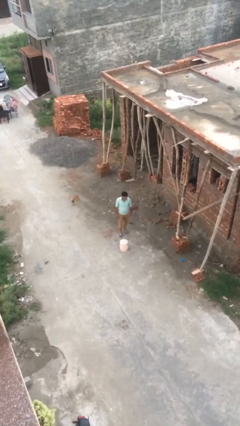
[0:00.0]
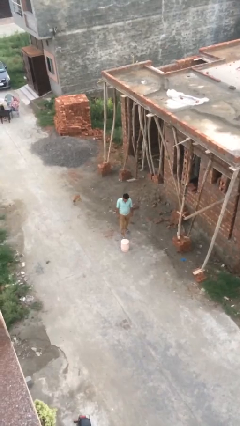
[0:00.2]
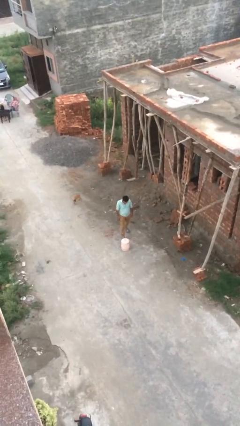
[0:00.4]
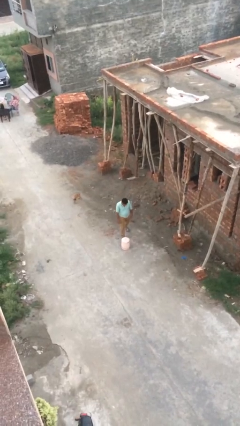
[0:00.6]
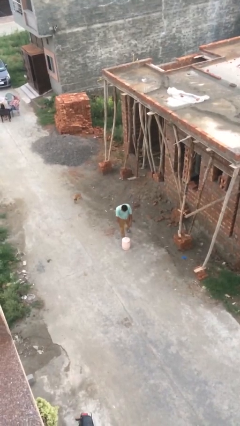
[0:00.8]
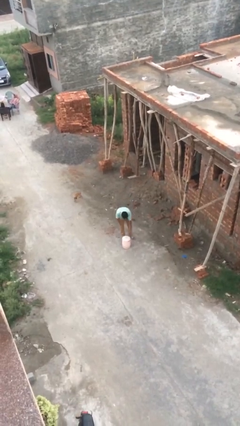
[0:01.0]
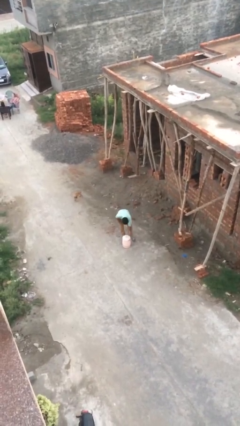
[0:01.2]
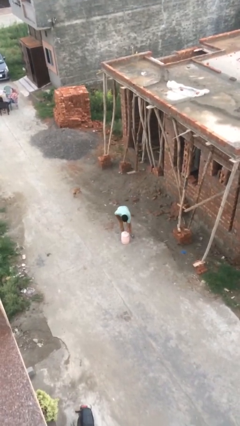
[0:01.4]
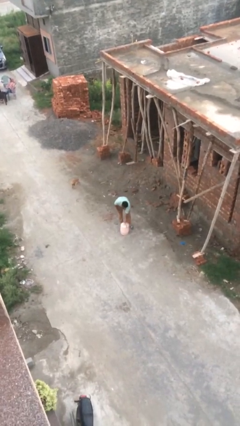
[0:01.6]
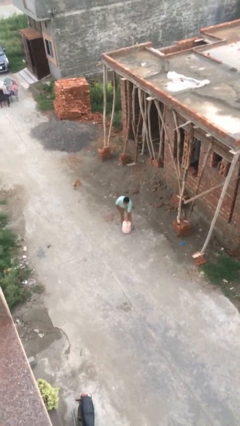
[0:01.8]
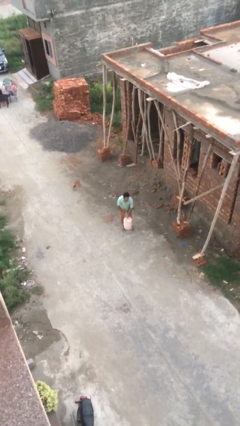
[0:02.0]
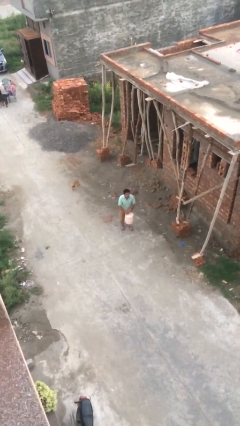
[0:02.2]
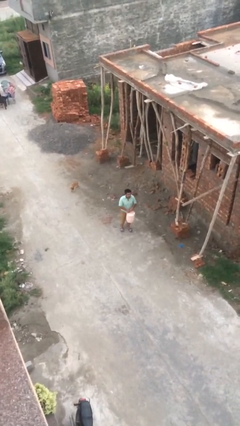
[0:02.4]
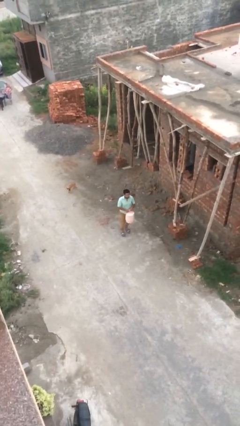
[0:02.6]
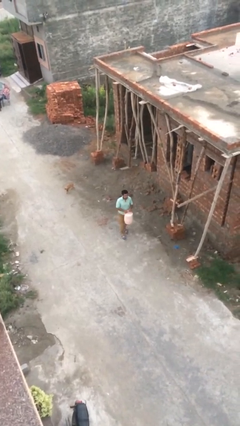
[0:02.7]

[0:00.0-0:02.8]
person picks up object from floor

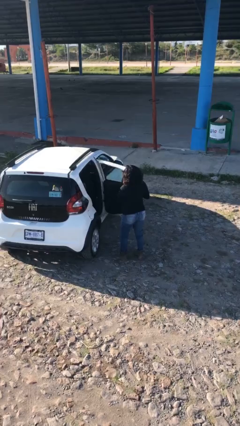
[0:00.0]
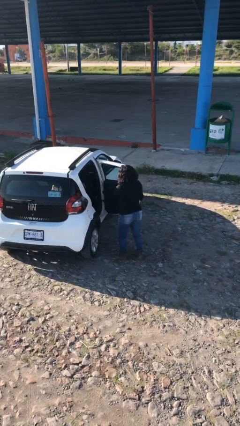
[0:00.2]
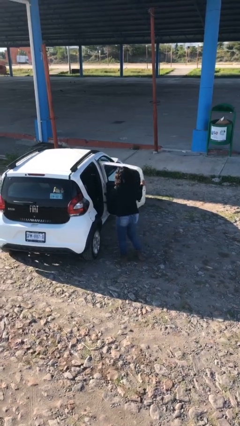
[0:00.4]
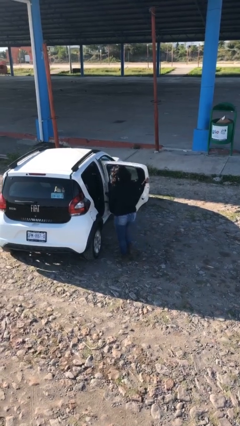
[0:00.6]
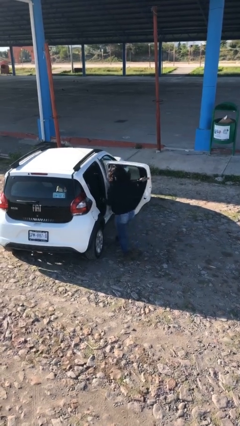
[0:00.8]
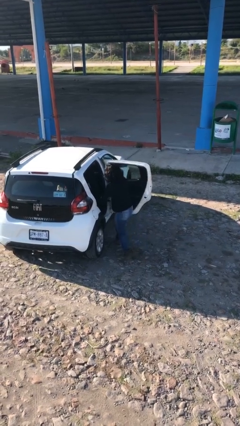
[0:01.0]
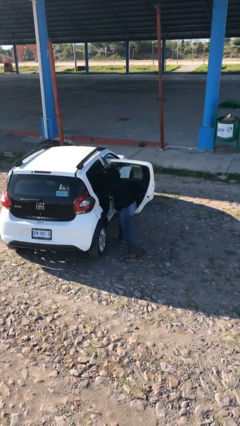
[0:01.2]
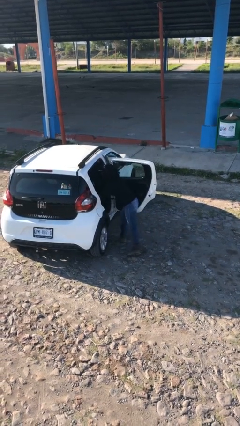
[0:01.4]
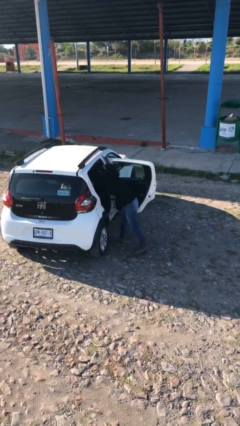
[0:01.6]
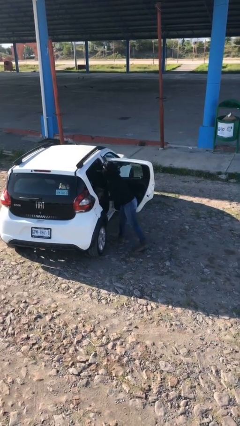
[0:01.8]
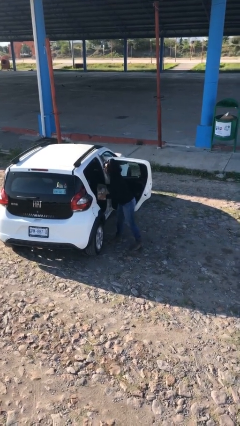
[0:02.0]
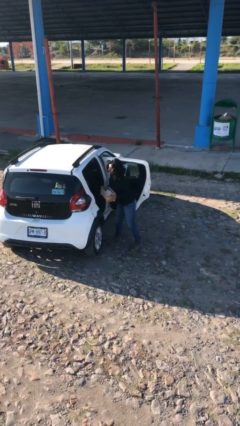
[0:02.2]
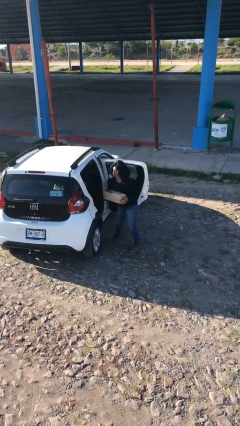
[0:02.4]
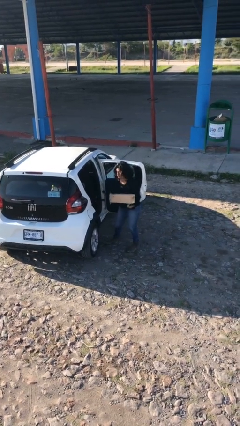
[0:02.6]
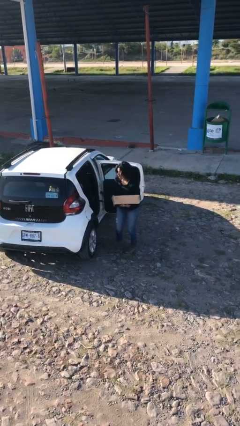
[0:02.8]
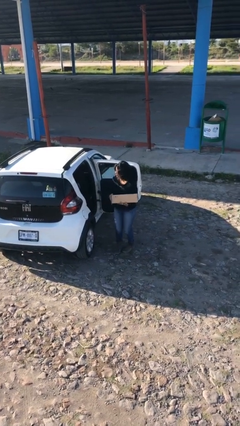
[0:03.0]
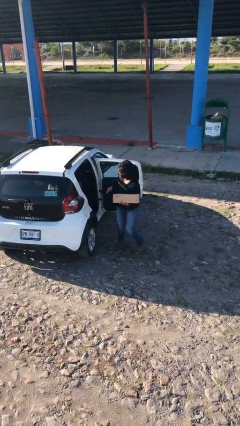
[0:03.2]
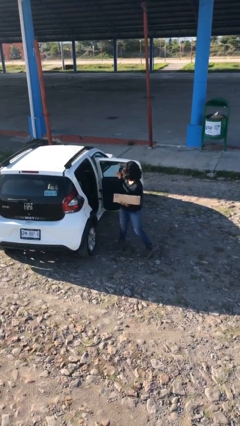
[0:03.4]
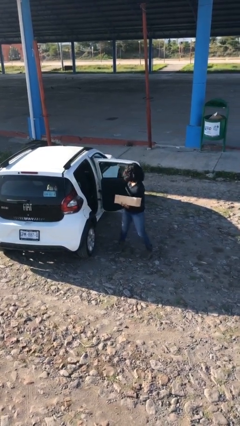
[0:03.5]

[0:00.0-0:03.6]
person unloads car

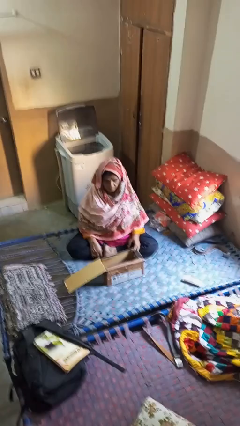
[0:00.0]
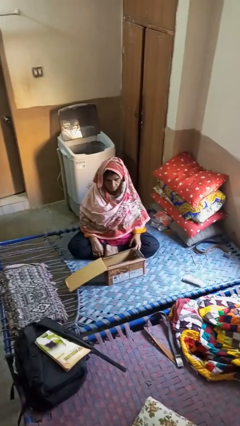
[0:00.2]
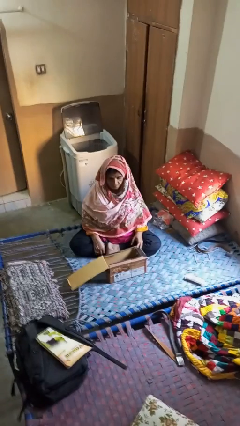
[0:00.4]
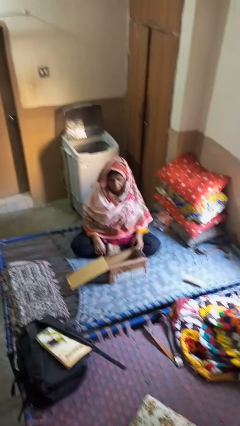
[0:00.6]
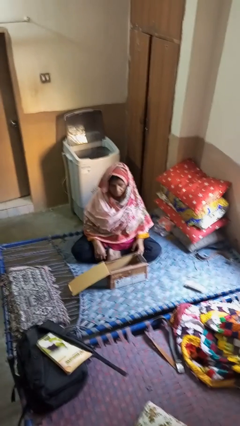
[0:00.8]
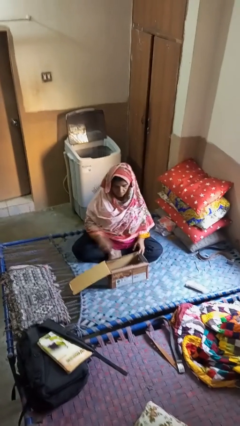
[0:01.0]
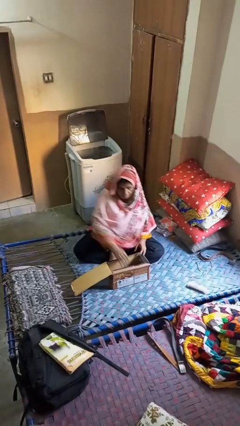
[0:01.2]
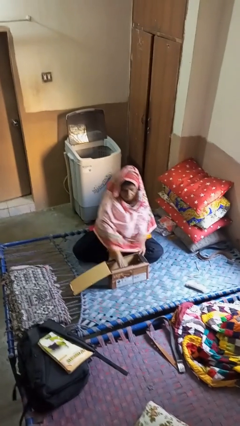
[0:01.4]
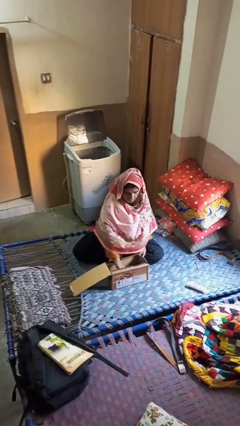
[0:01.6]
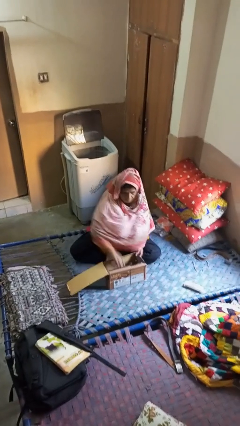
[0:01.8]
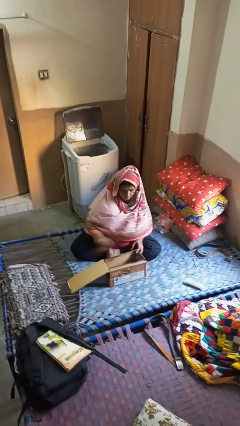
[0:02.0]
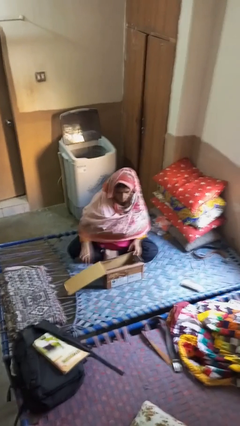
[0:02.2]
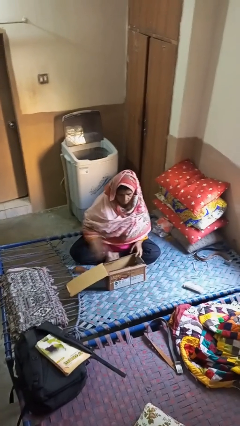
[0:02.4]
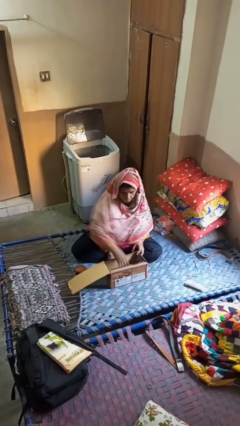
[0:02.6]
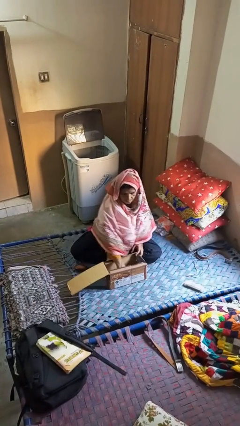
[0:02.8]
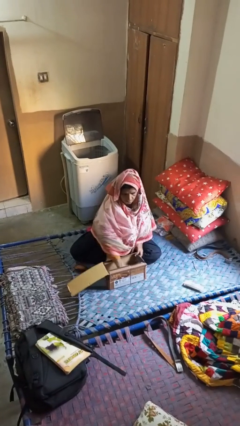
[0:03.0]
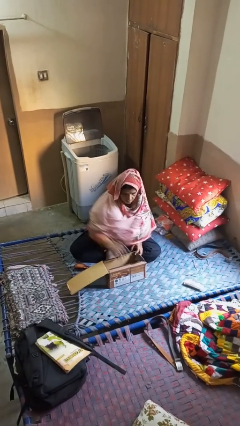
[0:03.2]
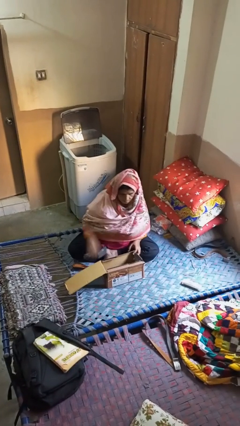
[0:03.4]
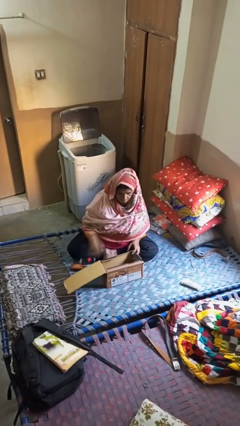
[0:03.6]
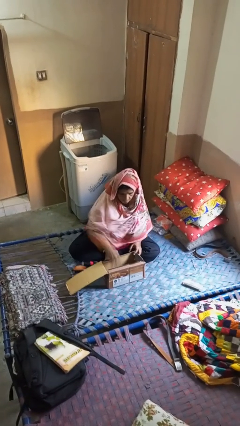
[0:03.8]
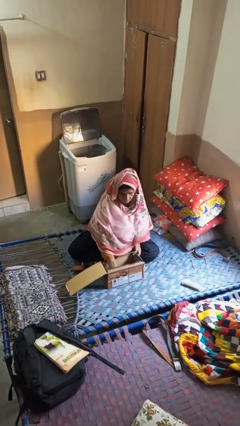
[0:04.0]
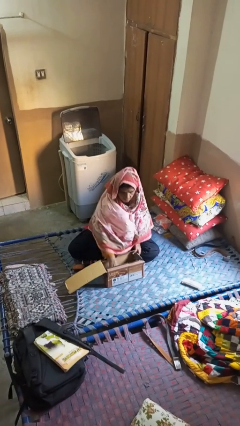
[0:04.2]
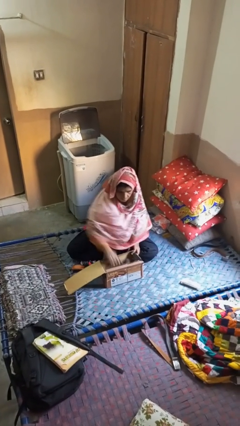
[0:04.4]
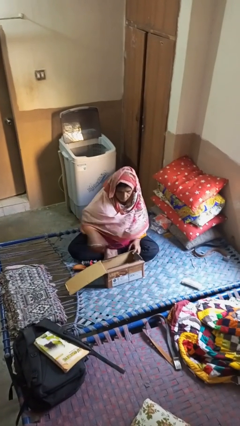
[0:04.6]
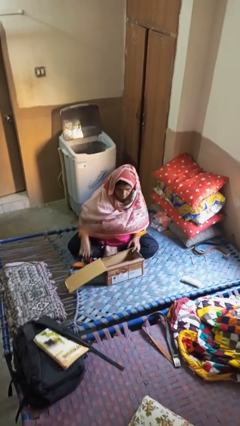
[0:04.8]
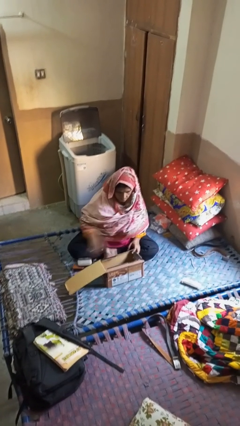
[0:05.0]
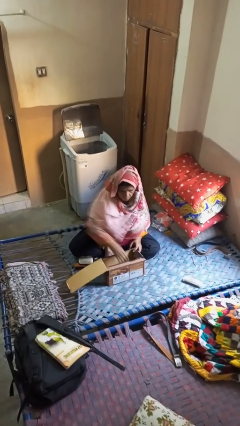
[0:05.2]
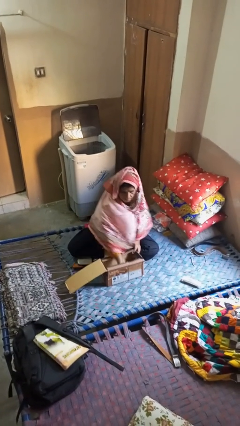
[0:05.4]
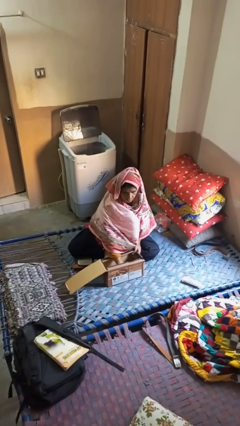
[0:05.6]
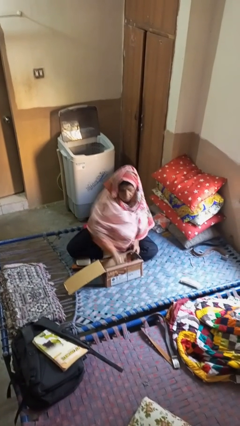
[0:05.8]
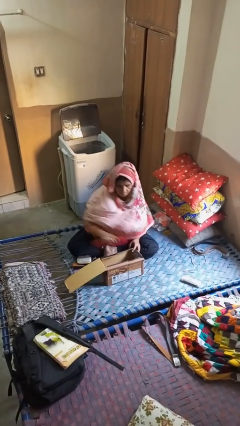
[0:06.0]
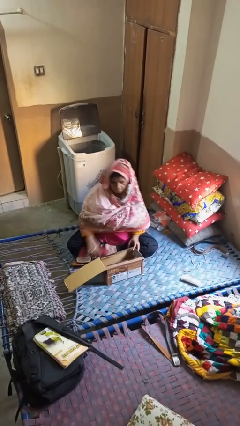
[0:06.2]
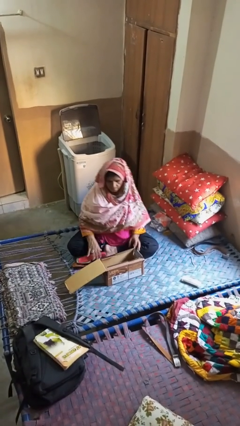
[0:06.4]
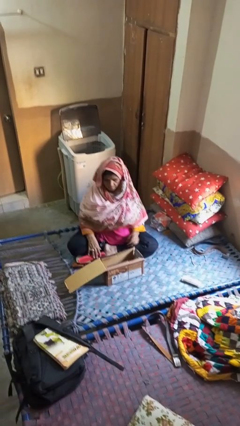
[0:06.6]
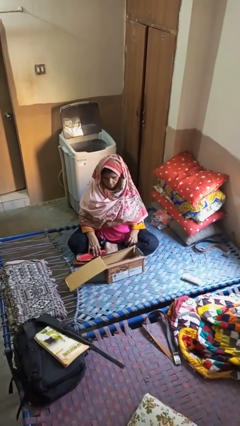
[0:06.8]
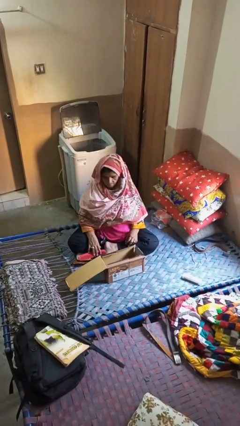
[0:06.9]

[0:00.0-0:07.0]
person takes object from box

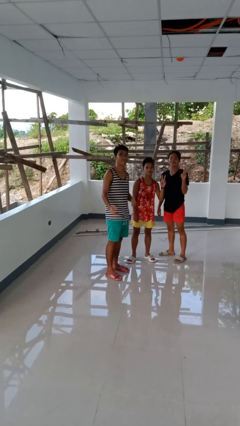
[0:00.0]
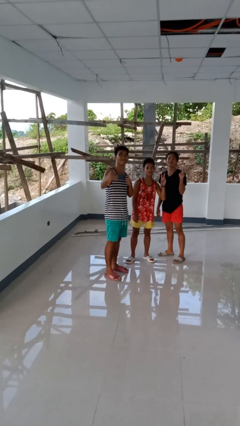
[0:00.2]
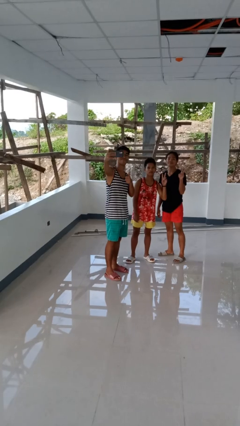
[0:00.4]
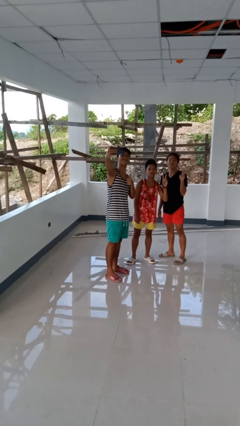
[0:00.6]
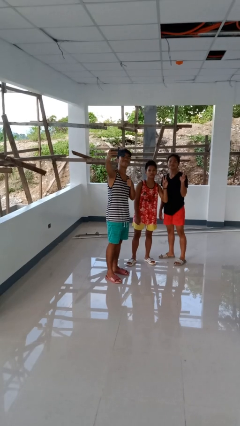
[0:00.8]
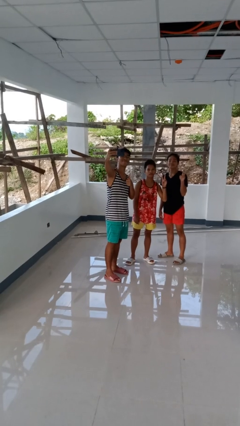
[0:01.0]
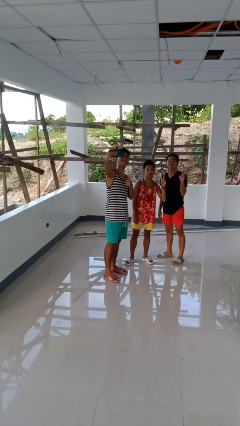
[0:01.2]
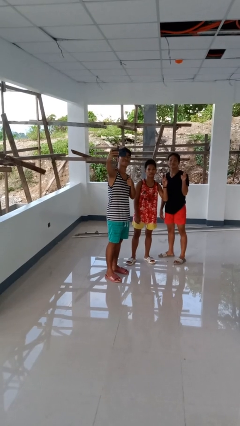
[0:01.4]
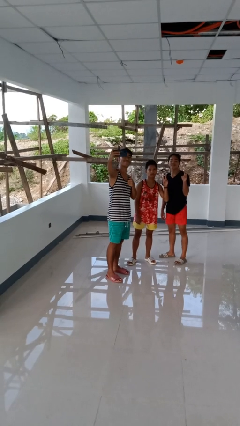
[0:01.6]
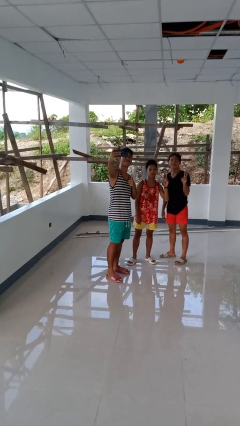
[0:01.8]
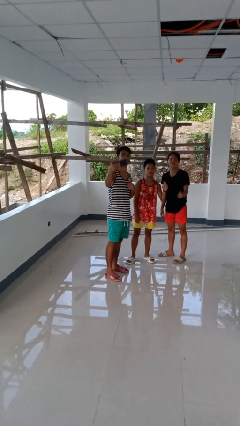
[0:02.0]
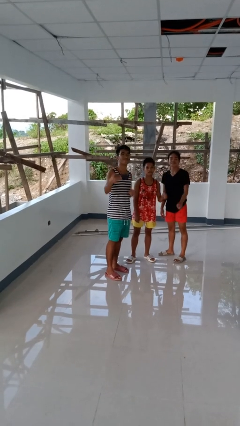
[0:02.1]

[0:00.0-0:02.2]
person takes selfie with person

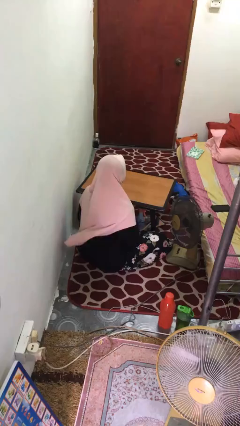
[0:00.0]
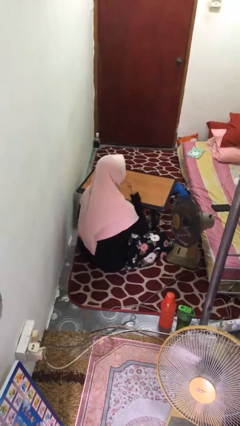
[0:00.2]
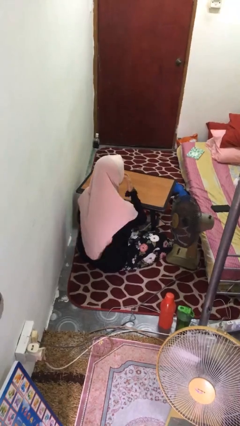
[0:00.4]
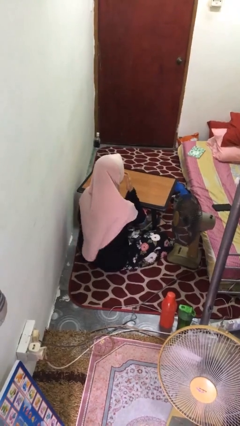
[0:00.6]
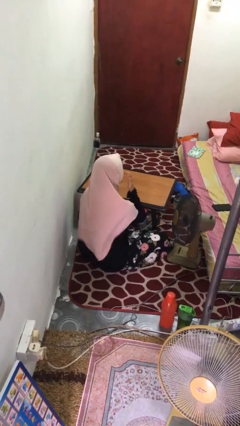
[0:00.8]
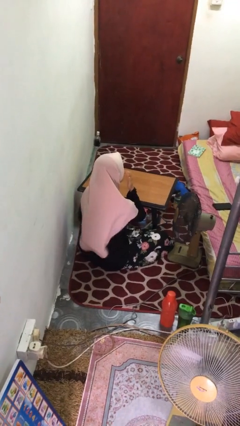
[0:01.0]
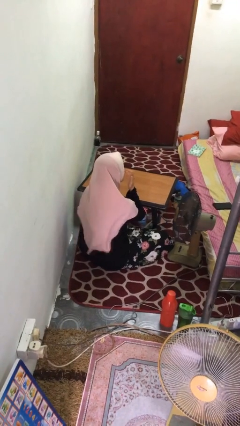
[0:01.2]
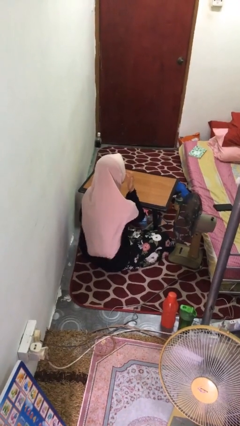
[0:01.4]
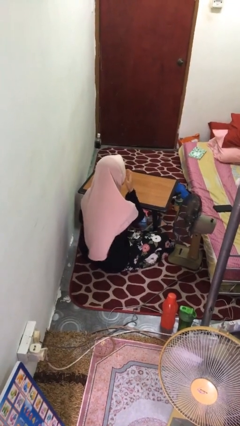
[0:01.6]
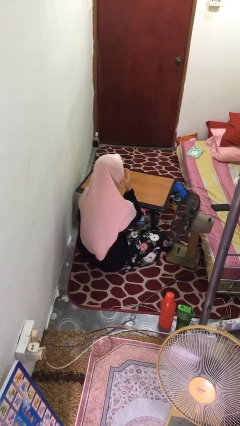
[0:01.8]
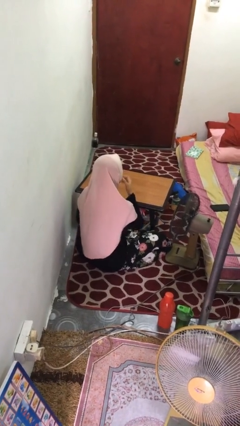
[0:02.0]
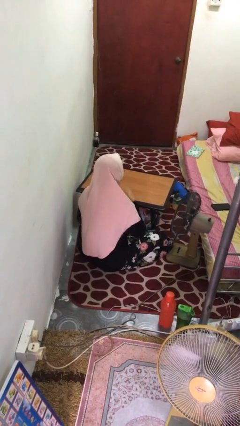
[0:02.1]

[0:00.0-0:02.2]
person licks fingers
